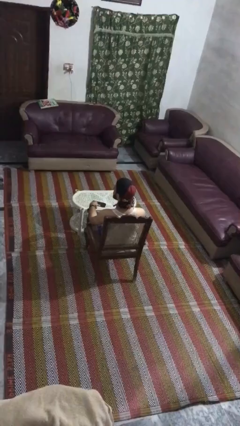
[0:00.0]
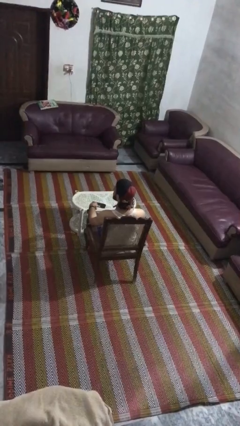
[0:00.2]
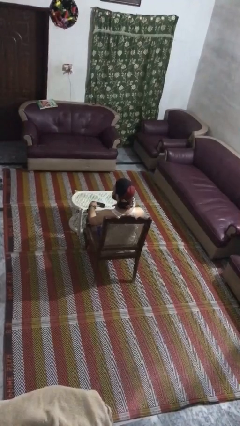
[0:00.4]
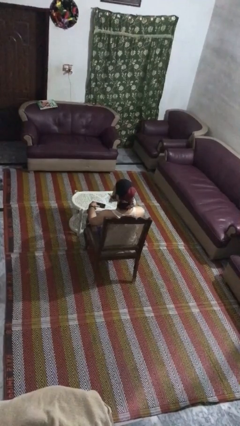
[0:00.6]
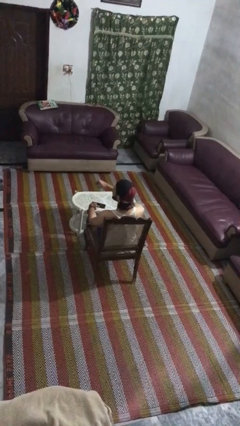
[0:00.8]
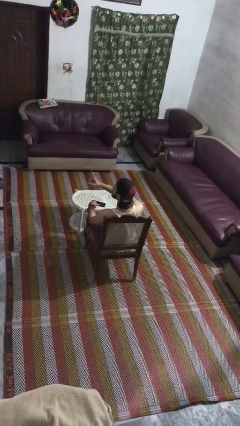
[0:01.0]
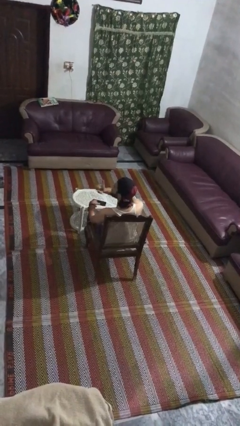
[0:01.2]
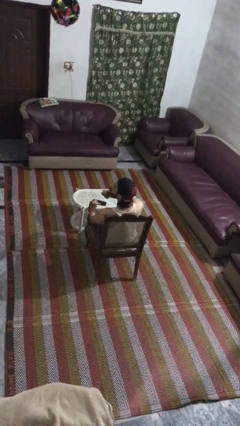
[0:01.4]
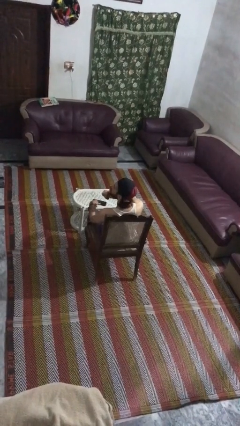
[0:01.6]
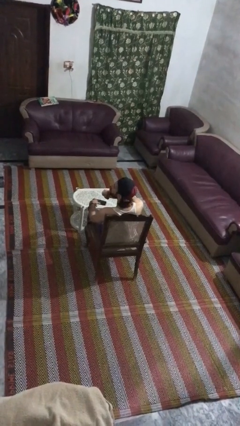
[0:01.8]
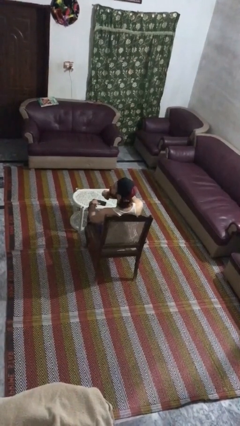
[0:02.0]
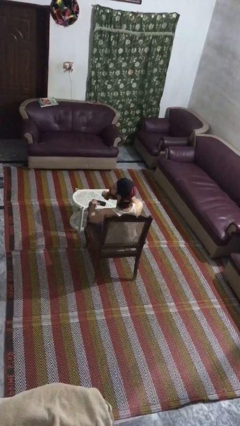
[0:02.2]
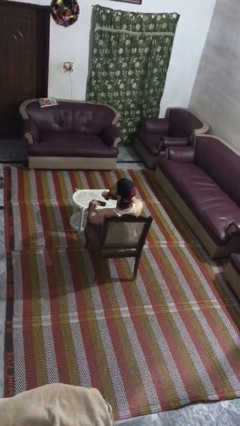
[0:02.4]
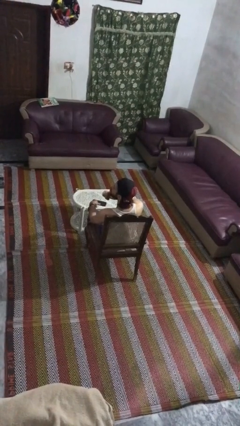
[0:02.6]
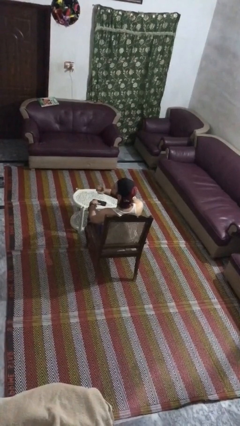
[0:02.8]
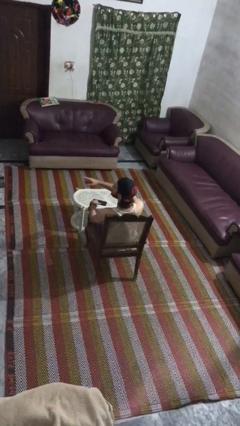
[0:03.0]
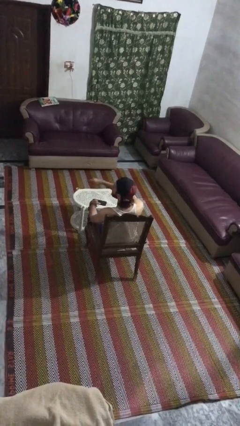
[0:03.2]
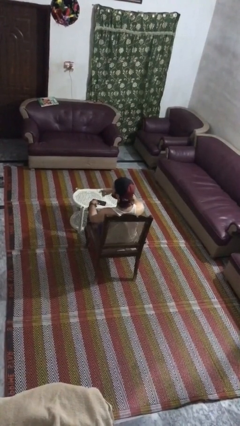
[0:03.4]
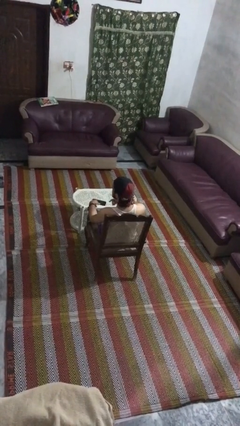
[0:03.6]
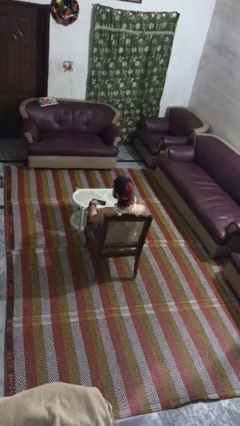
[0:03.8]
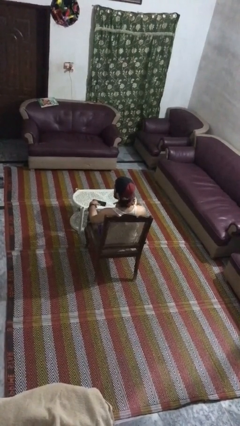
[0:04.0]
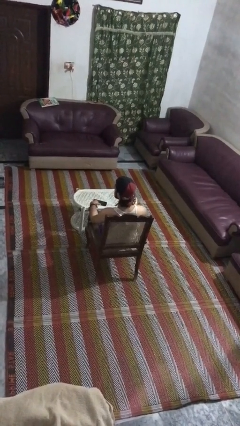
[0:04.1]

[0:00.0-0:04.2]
person gestures be quiet

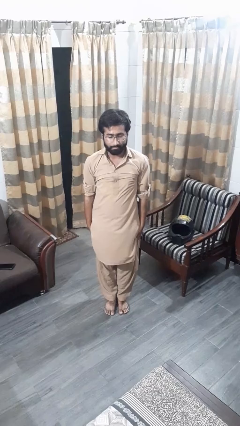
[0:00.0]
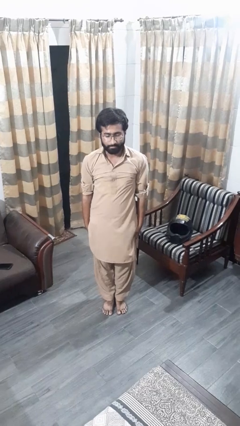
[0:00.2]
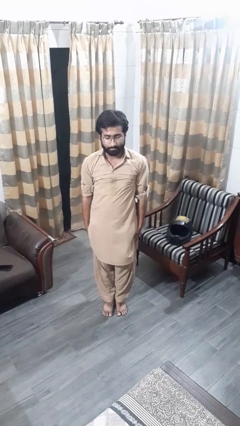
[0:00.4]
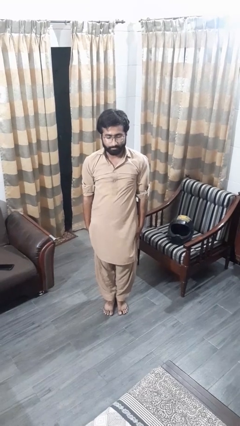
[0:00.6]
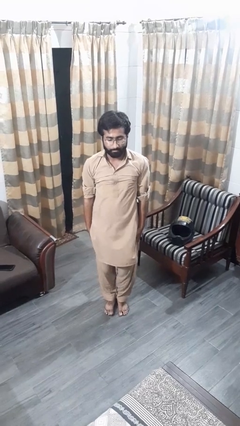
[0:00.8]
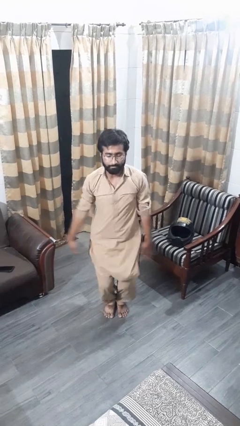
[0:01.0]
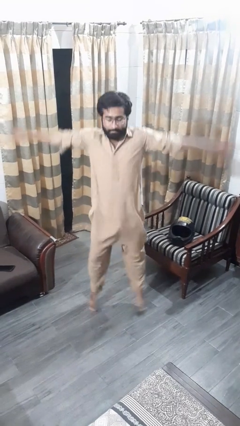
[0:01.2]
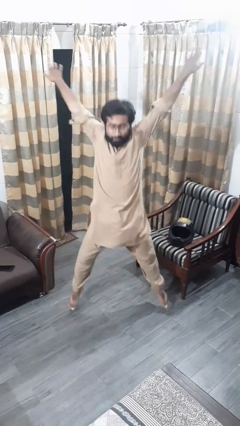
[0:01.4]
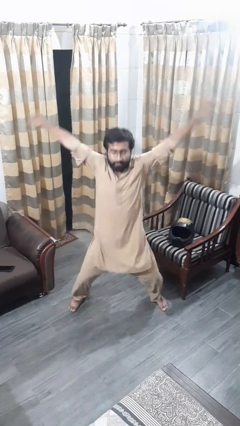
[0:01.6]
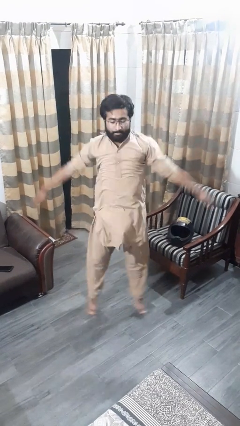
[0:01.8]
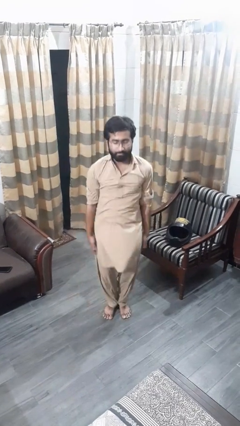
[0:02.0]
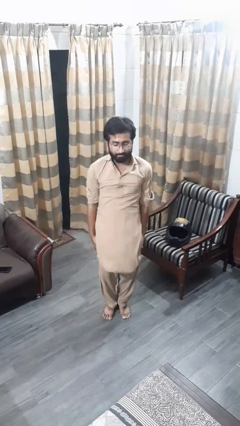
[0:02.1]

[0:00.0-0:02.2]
person exercises with jumping jacks

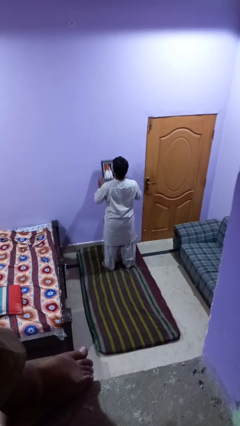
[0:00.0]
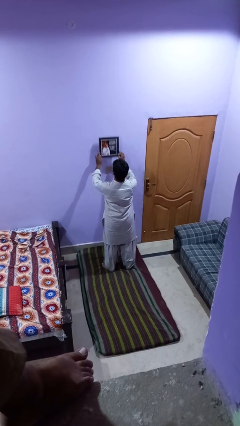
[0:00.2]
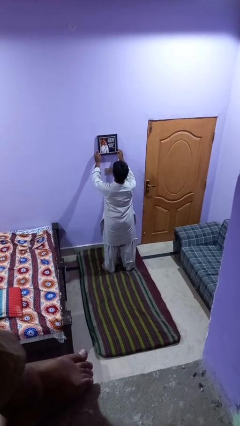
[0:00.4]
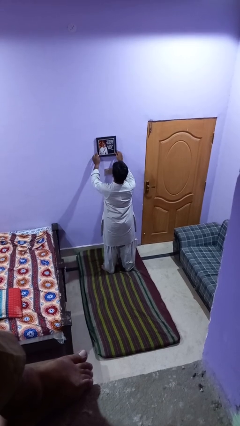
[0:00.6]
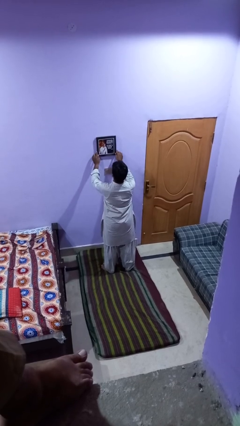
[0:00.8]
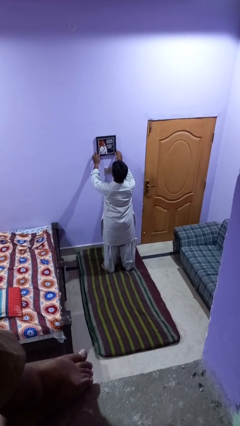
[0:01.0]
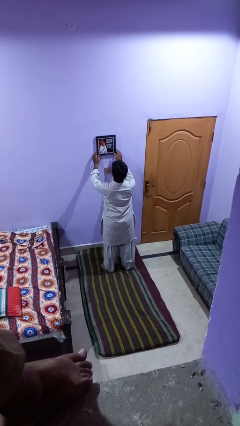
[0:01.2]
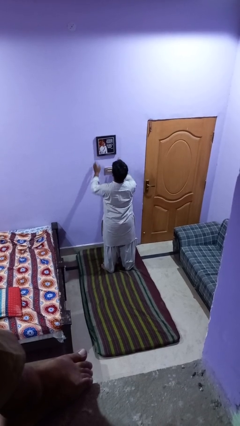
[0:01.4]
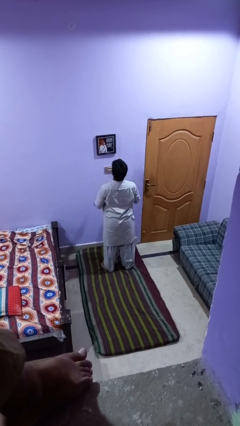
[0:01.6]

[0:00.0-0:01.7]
person puts up picture frame

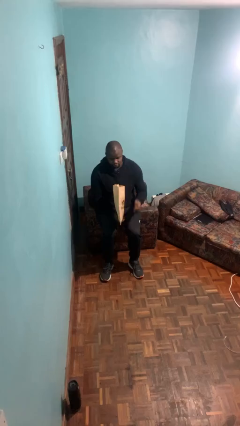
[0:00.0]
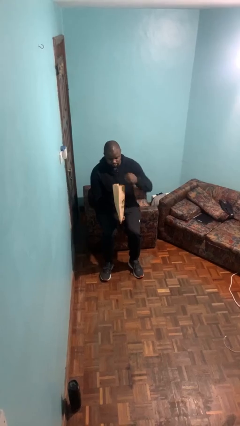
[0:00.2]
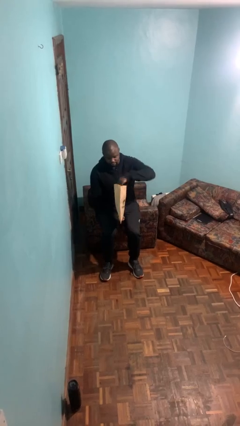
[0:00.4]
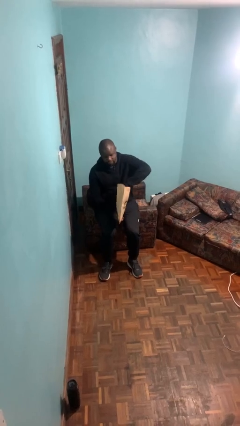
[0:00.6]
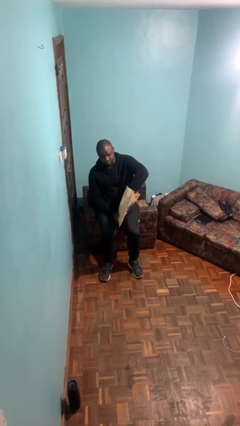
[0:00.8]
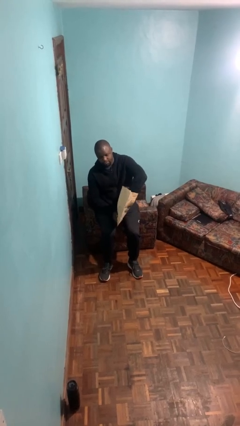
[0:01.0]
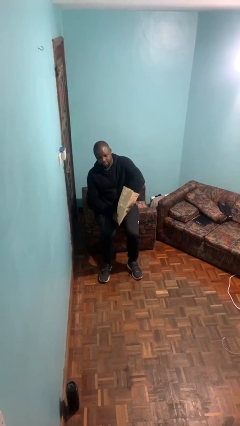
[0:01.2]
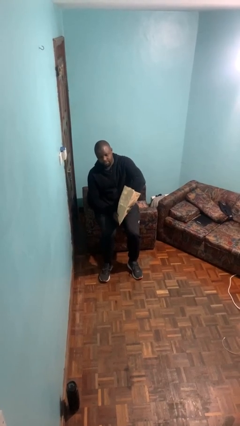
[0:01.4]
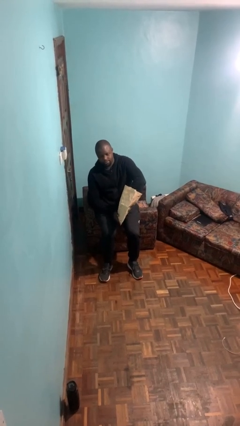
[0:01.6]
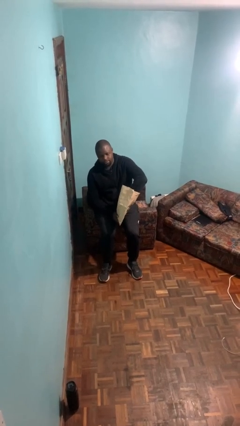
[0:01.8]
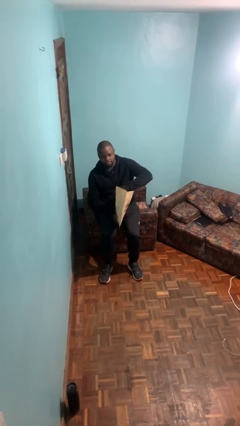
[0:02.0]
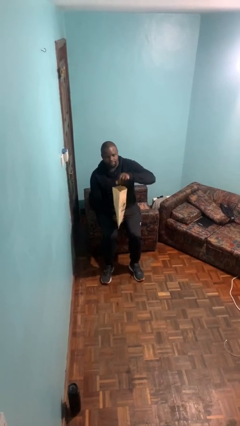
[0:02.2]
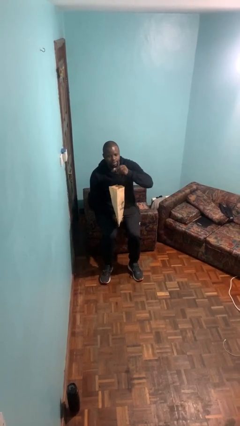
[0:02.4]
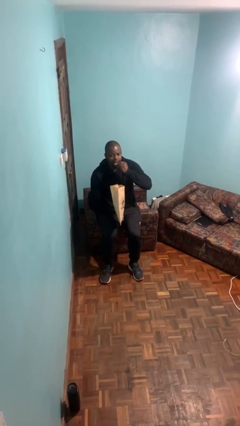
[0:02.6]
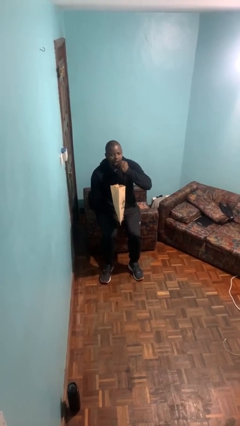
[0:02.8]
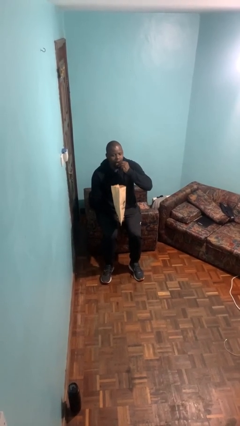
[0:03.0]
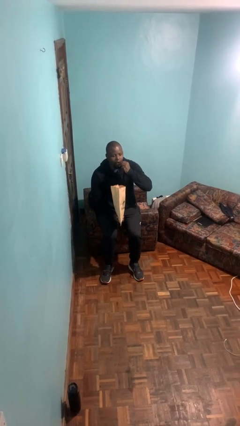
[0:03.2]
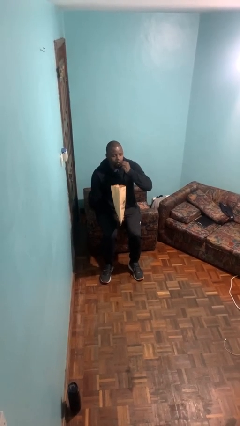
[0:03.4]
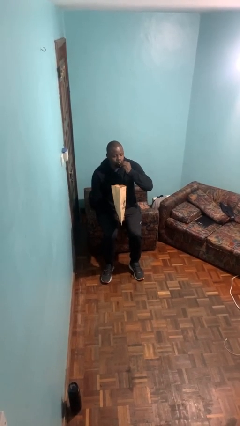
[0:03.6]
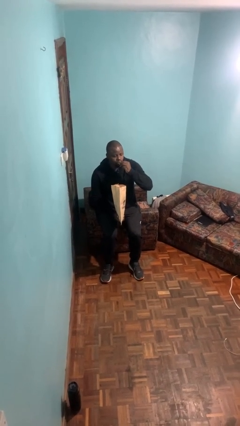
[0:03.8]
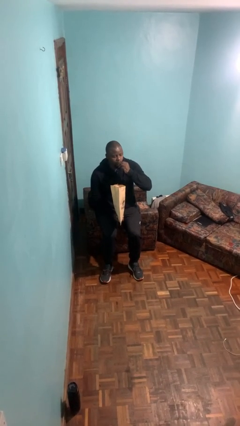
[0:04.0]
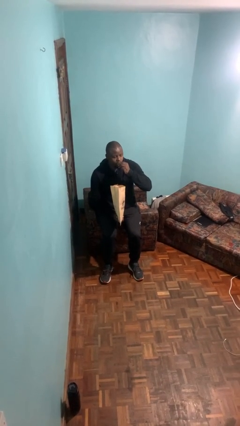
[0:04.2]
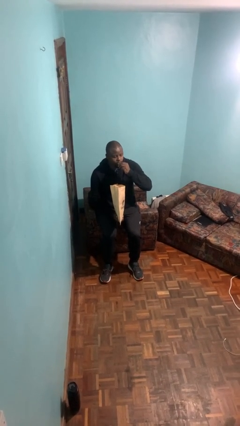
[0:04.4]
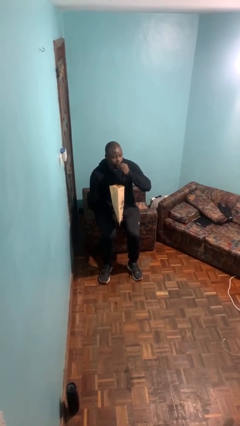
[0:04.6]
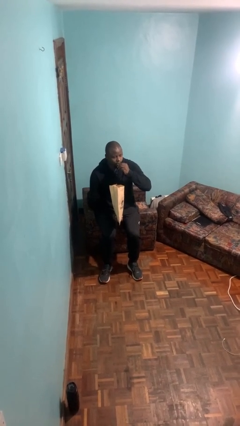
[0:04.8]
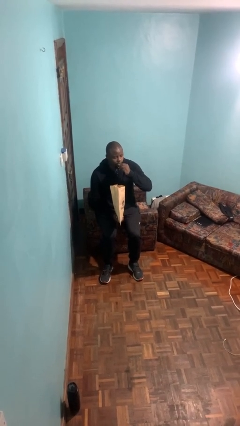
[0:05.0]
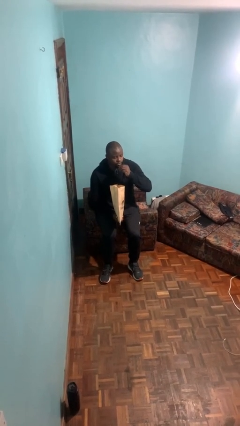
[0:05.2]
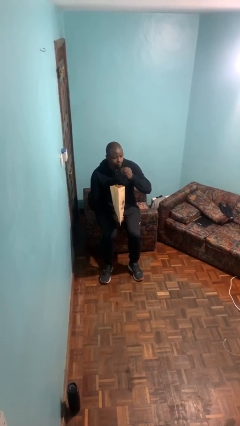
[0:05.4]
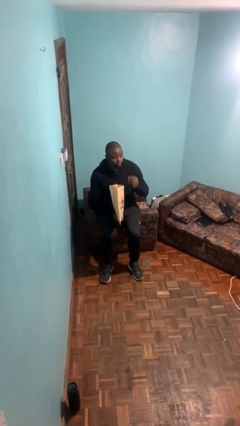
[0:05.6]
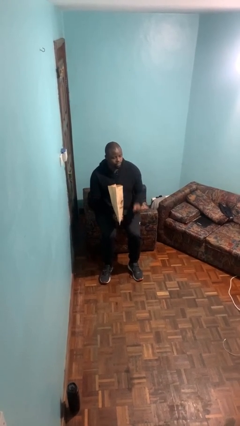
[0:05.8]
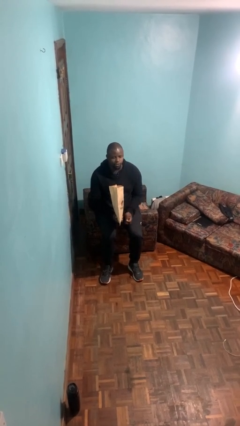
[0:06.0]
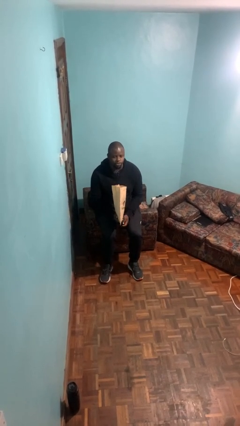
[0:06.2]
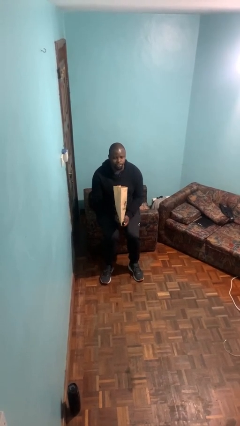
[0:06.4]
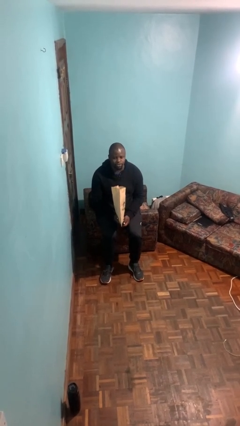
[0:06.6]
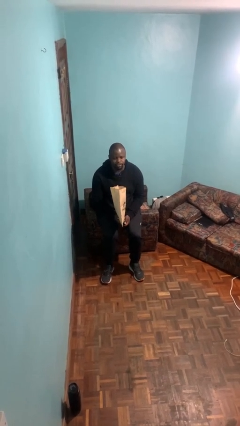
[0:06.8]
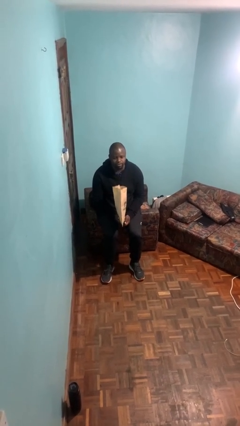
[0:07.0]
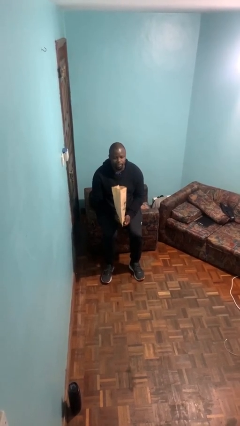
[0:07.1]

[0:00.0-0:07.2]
person eats snack from bag

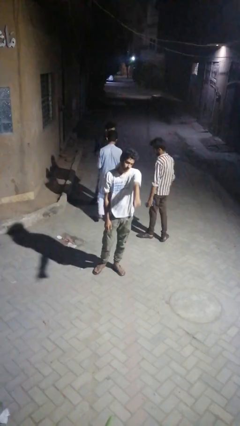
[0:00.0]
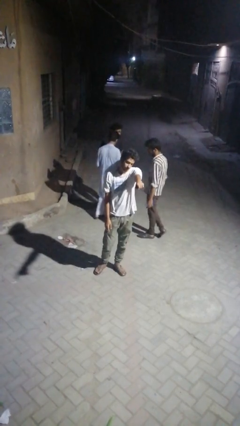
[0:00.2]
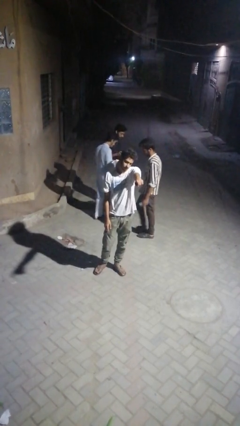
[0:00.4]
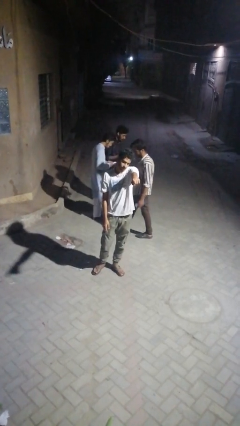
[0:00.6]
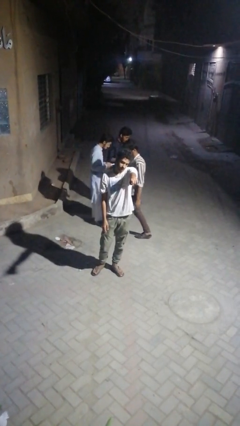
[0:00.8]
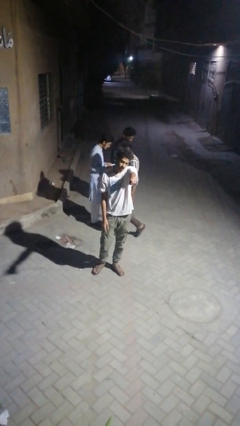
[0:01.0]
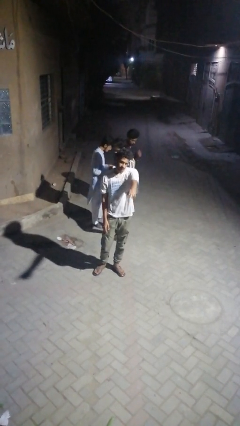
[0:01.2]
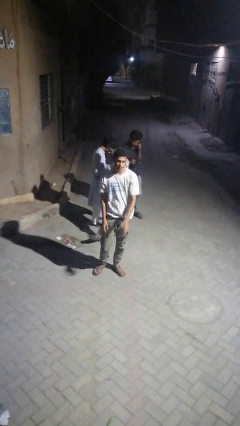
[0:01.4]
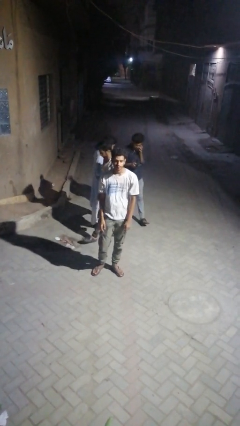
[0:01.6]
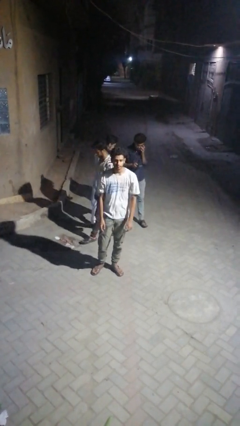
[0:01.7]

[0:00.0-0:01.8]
person points at person

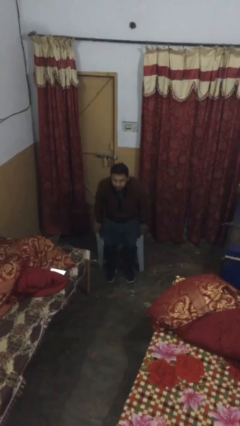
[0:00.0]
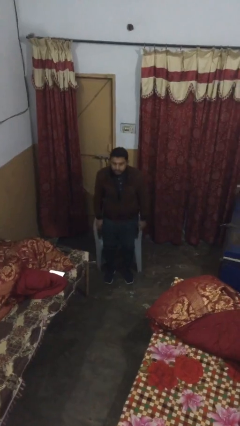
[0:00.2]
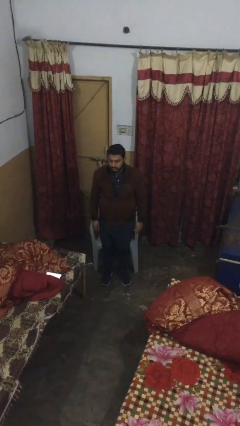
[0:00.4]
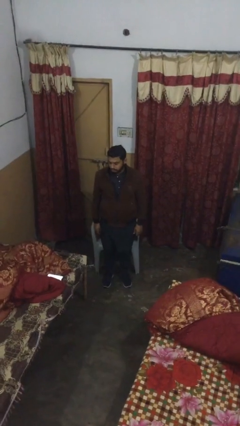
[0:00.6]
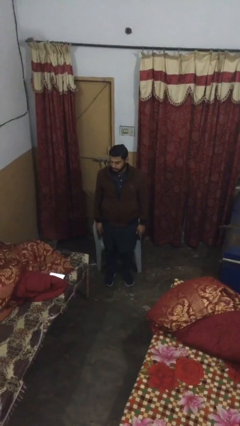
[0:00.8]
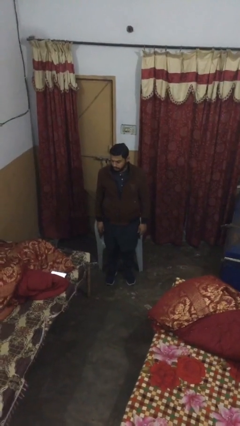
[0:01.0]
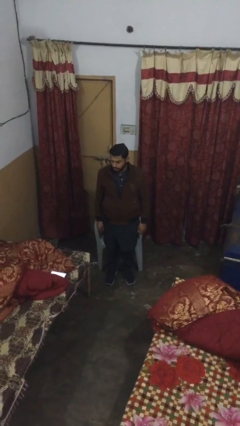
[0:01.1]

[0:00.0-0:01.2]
person stands up
